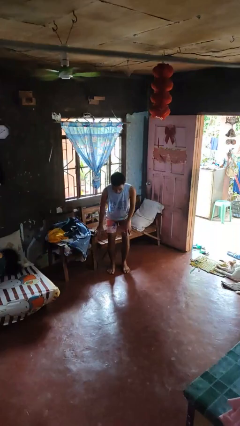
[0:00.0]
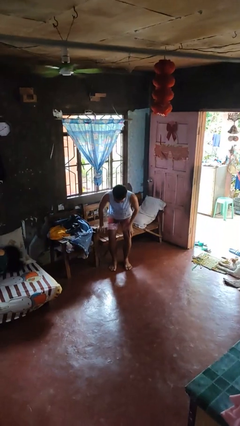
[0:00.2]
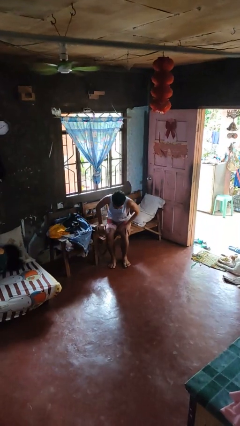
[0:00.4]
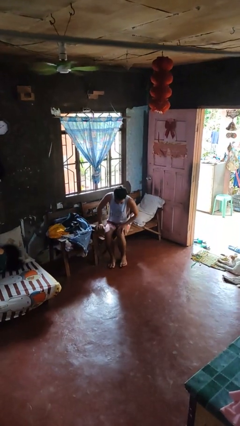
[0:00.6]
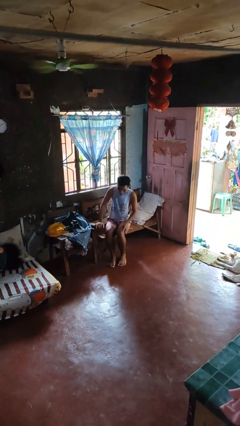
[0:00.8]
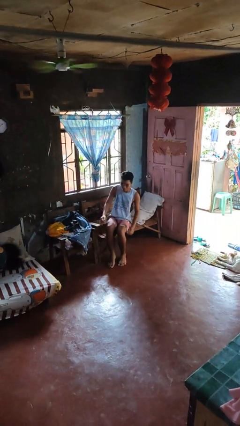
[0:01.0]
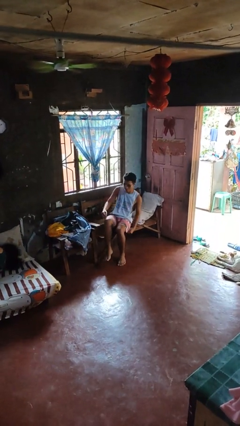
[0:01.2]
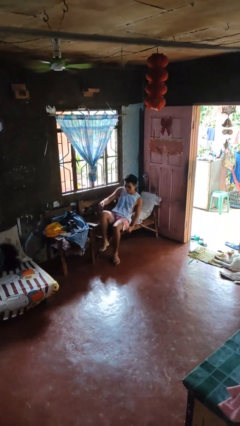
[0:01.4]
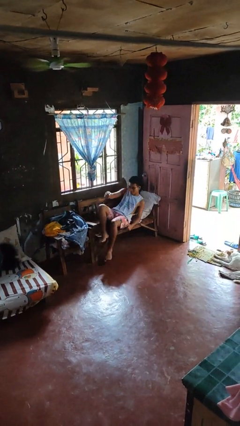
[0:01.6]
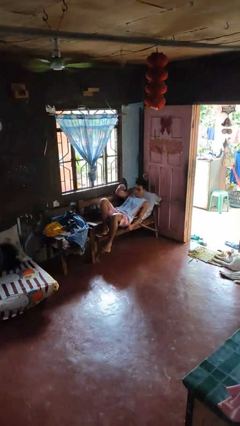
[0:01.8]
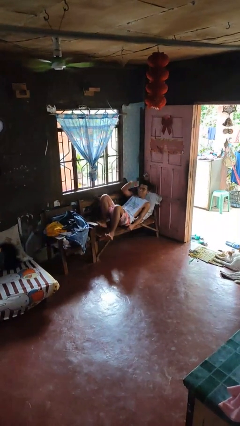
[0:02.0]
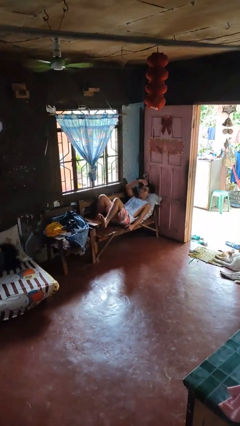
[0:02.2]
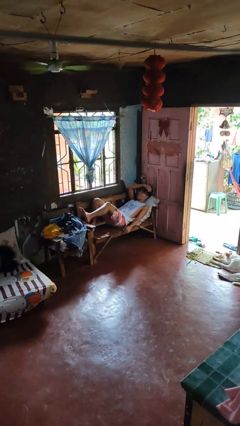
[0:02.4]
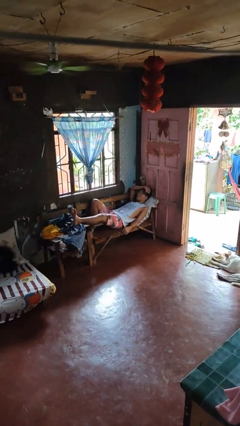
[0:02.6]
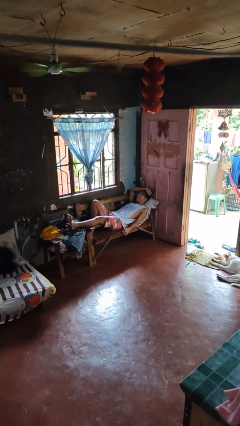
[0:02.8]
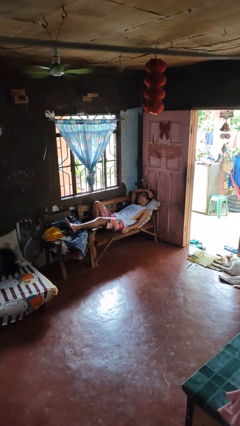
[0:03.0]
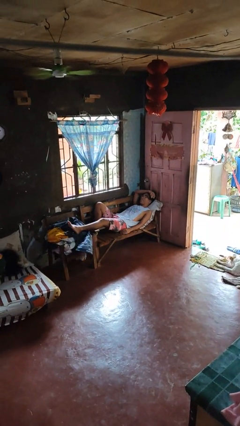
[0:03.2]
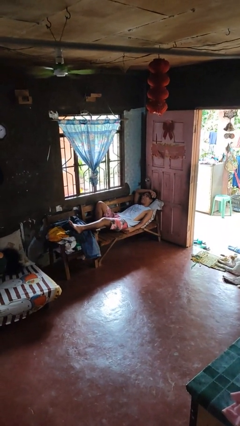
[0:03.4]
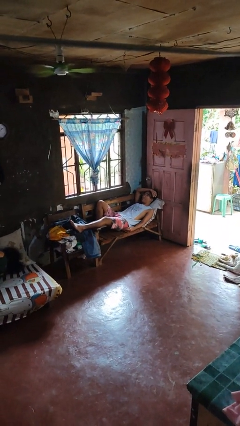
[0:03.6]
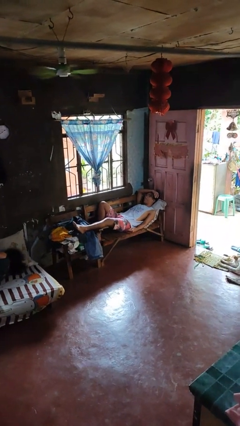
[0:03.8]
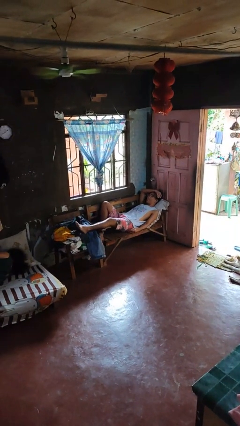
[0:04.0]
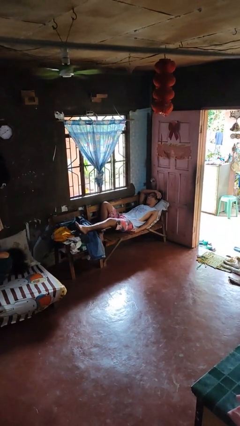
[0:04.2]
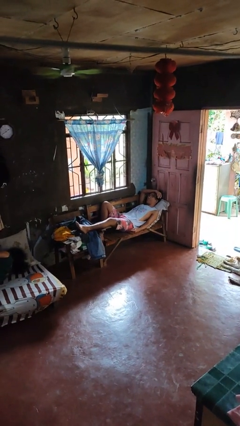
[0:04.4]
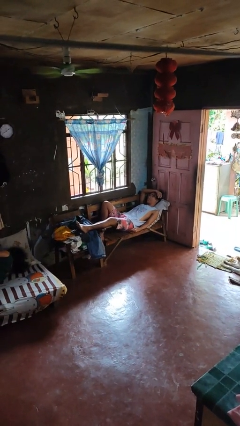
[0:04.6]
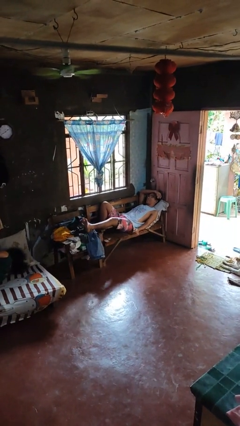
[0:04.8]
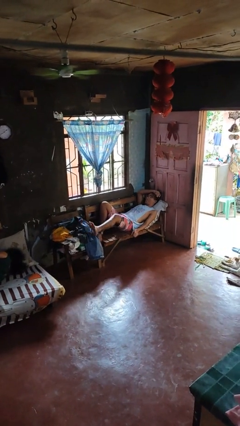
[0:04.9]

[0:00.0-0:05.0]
person lies down on couch

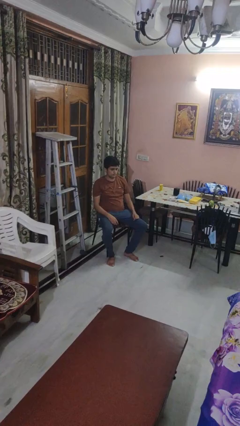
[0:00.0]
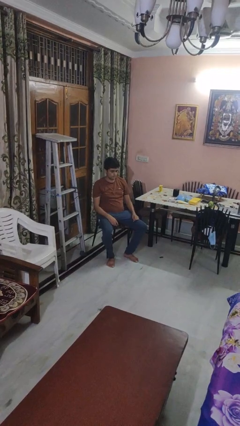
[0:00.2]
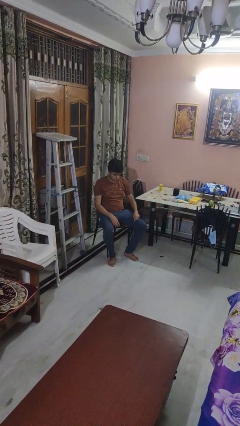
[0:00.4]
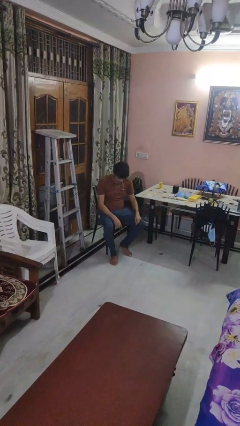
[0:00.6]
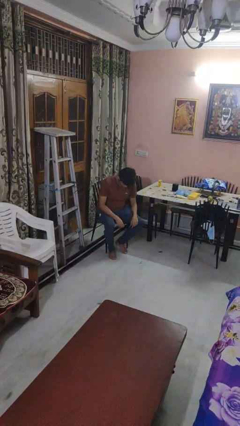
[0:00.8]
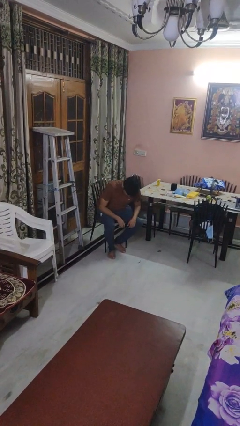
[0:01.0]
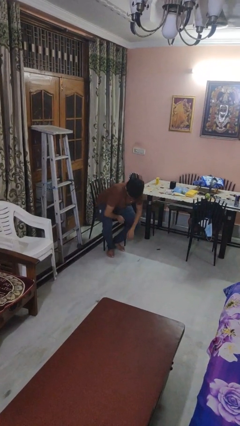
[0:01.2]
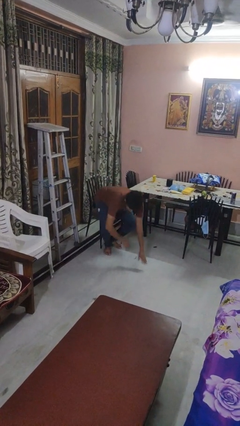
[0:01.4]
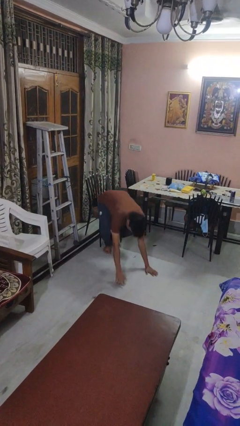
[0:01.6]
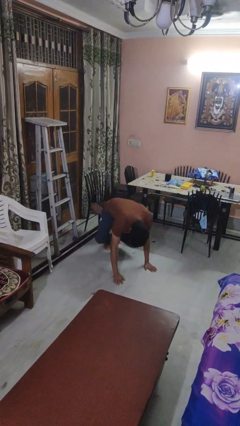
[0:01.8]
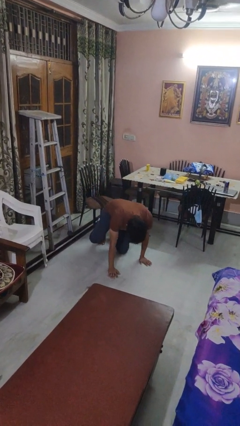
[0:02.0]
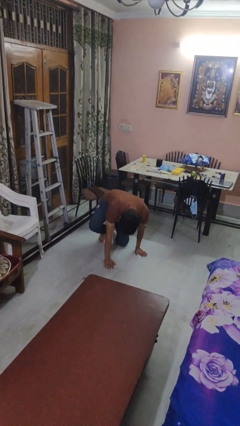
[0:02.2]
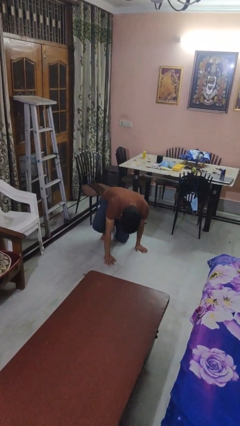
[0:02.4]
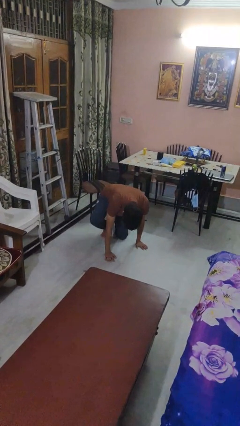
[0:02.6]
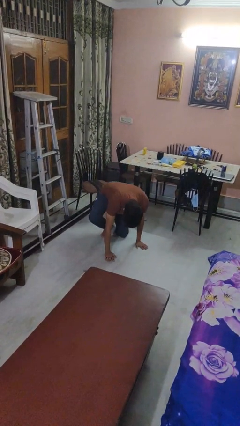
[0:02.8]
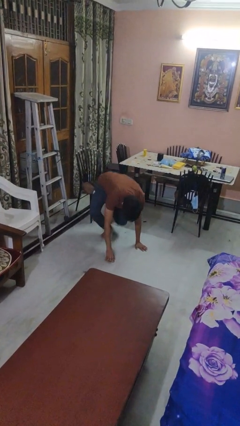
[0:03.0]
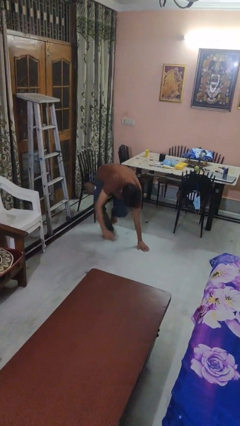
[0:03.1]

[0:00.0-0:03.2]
person falls while standing

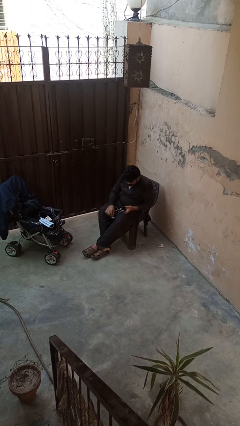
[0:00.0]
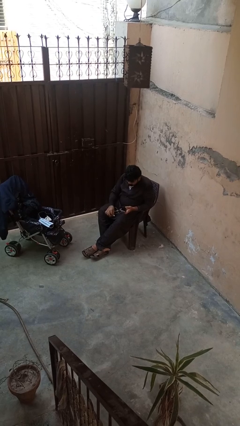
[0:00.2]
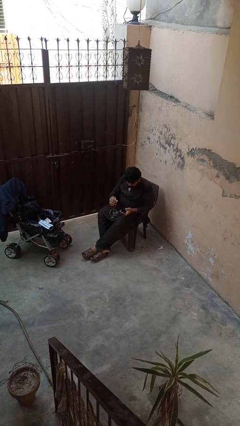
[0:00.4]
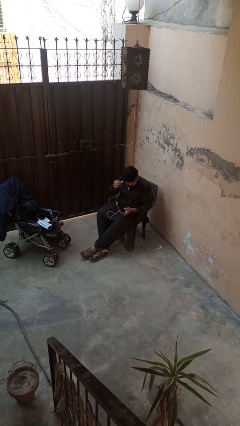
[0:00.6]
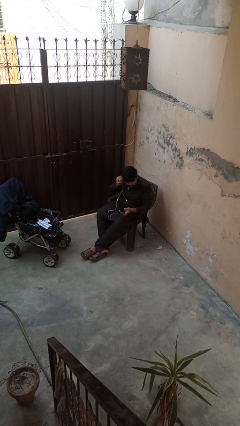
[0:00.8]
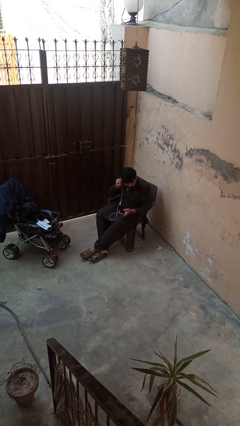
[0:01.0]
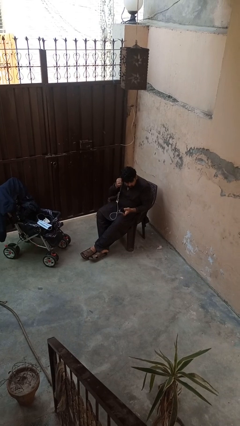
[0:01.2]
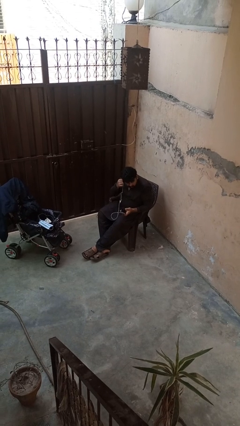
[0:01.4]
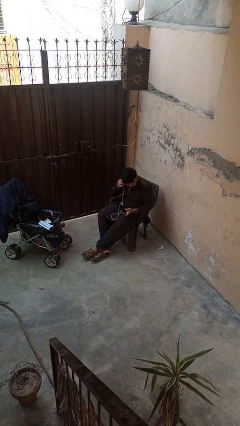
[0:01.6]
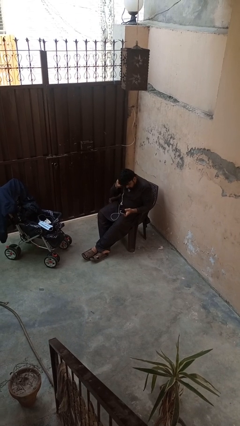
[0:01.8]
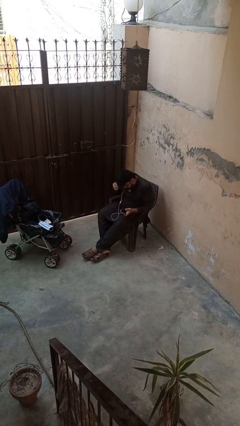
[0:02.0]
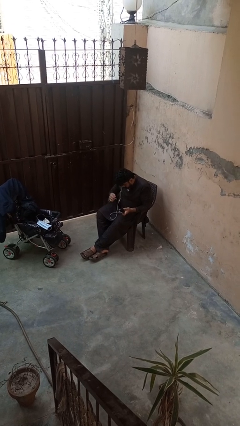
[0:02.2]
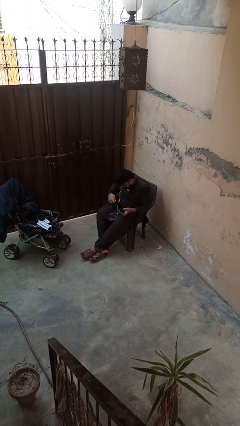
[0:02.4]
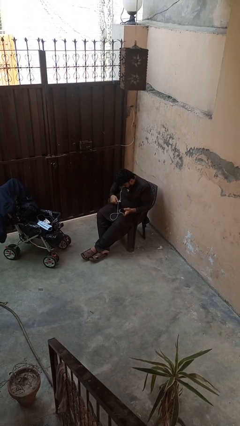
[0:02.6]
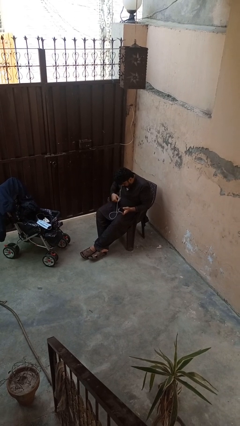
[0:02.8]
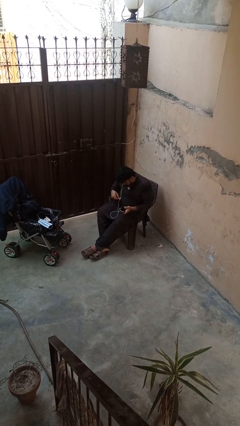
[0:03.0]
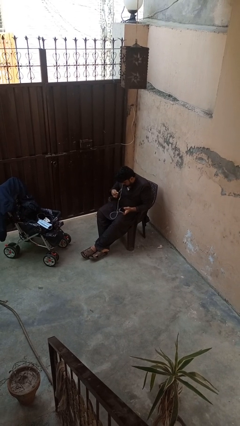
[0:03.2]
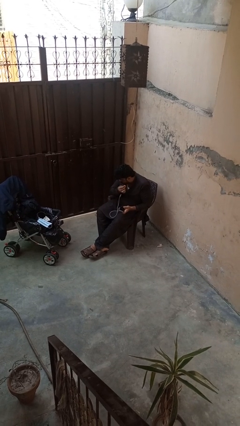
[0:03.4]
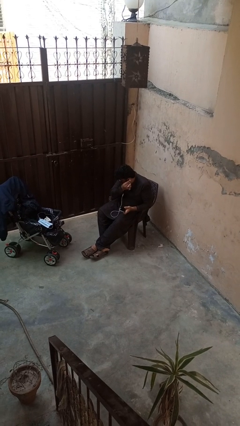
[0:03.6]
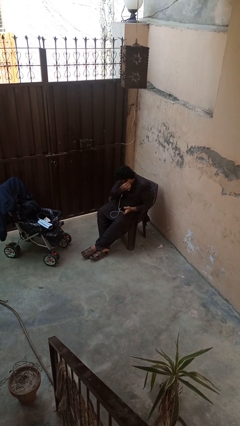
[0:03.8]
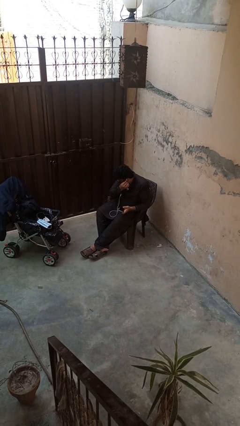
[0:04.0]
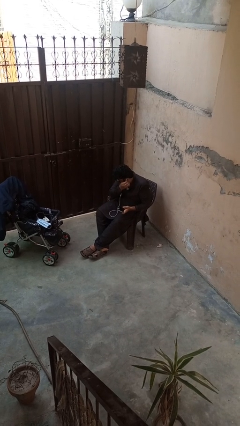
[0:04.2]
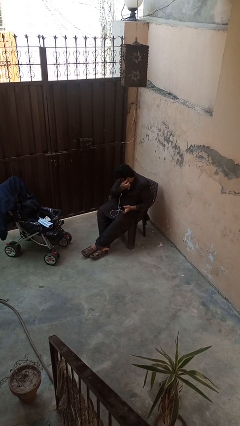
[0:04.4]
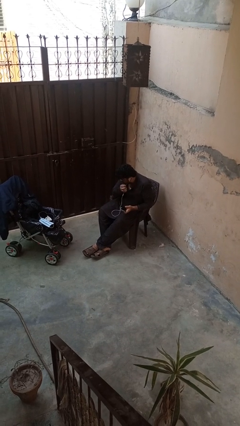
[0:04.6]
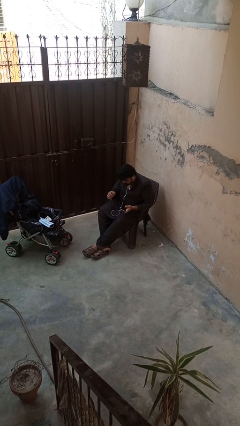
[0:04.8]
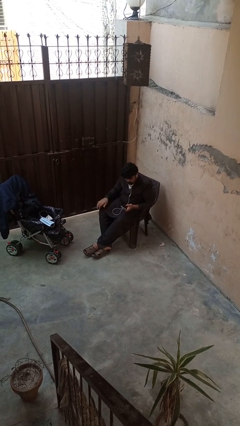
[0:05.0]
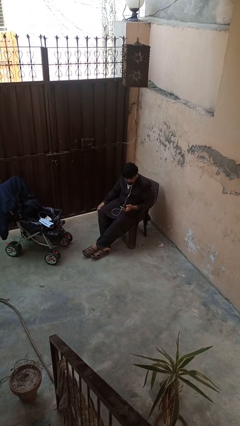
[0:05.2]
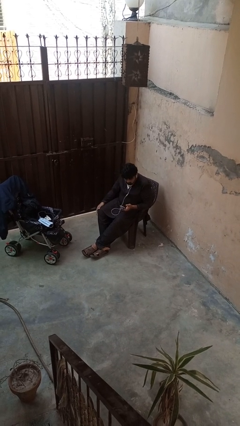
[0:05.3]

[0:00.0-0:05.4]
person puts on headphones

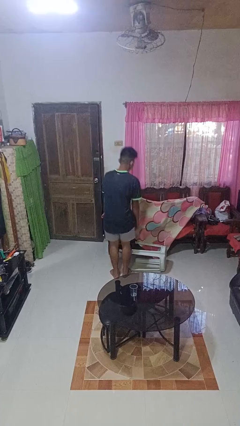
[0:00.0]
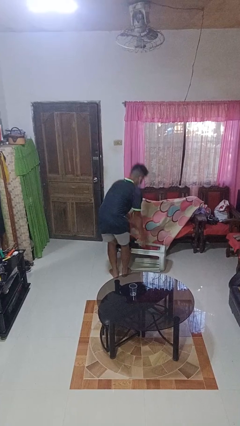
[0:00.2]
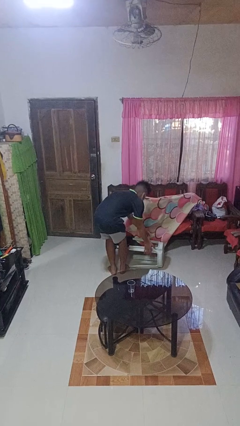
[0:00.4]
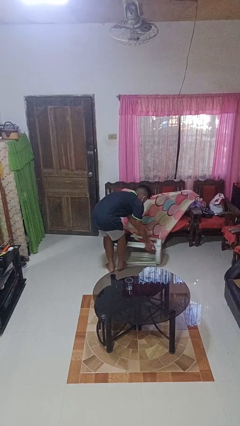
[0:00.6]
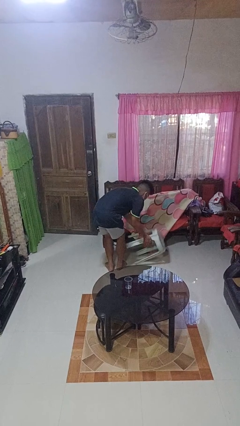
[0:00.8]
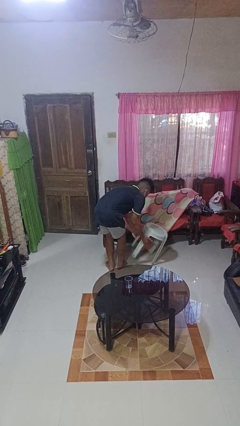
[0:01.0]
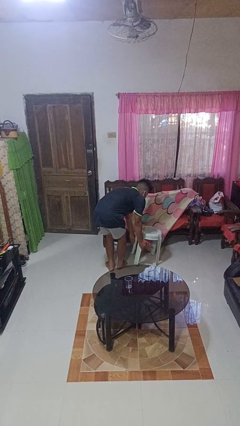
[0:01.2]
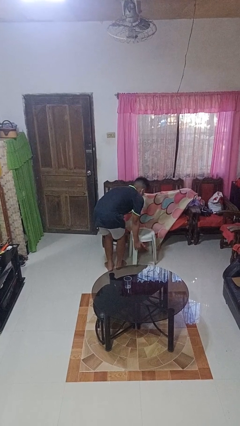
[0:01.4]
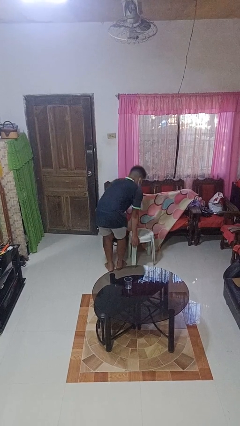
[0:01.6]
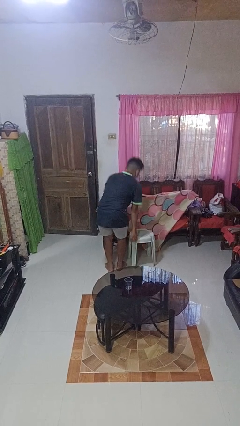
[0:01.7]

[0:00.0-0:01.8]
person sets upright furniture

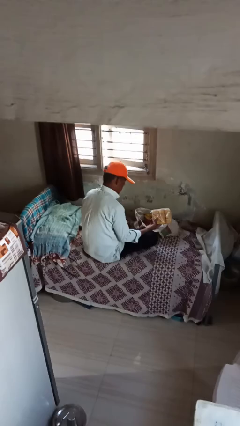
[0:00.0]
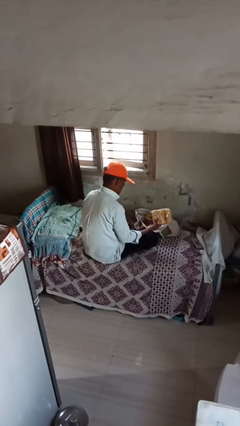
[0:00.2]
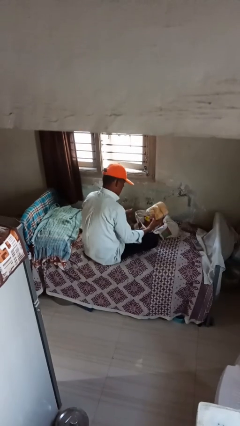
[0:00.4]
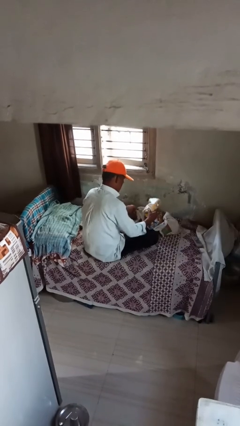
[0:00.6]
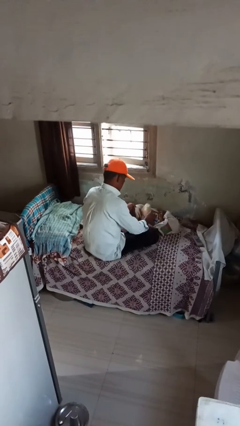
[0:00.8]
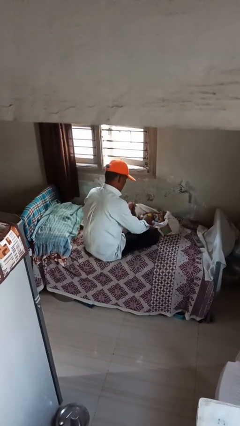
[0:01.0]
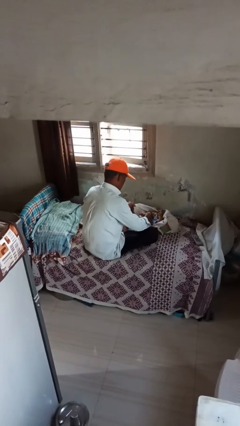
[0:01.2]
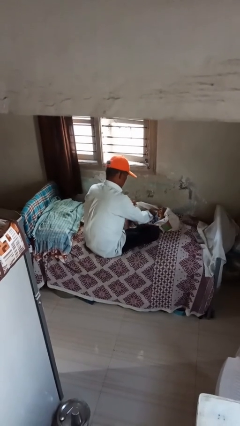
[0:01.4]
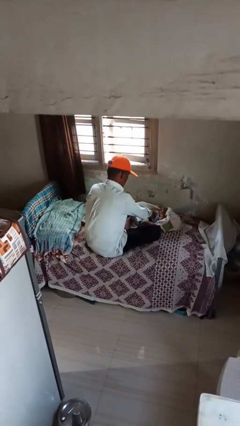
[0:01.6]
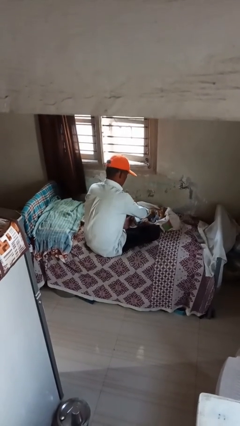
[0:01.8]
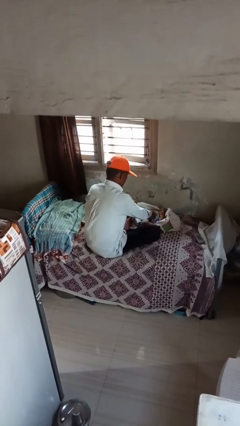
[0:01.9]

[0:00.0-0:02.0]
person puts object into bag

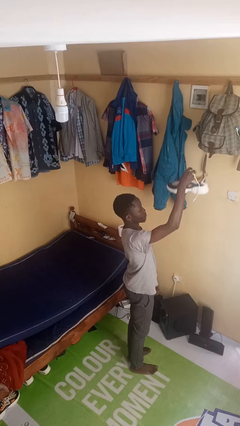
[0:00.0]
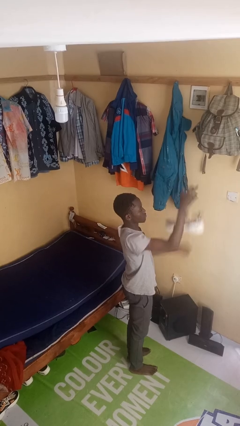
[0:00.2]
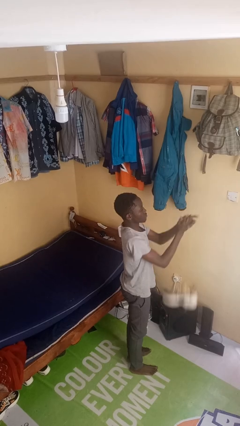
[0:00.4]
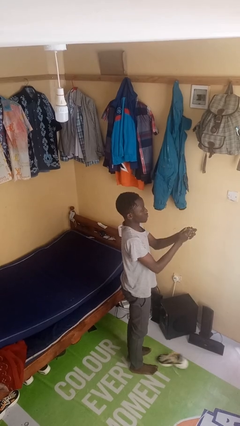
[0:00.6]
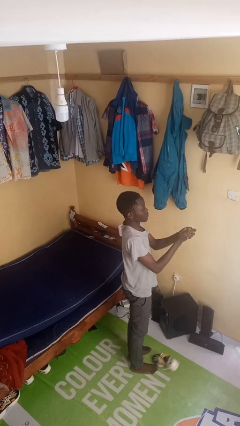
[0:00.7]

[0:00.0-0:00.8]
person drops object
